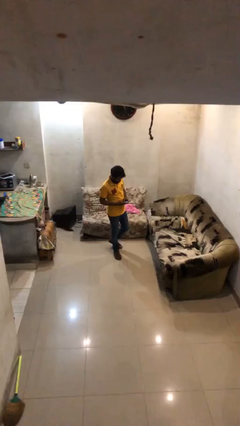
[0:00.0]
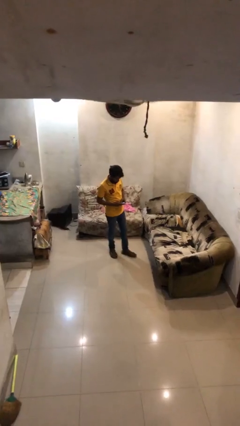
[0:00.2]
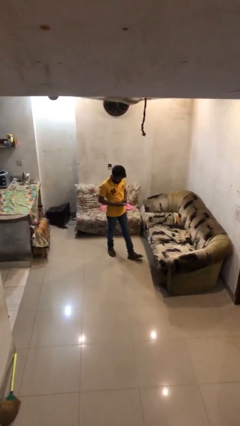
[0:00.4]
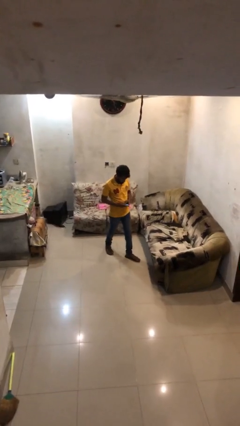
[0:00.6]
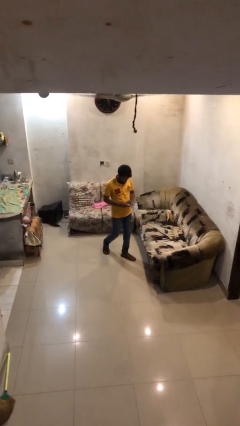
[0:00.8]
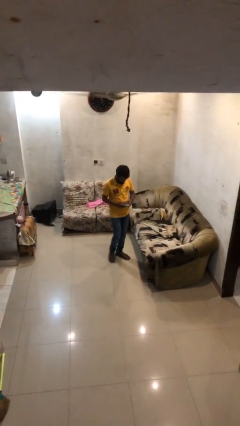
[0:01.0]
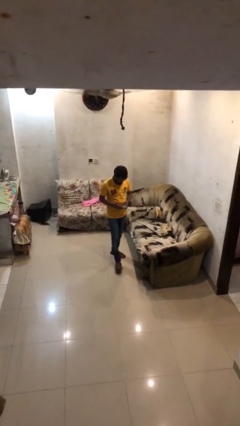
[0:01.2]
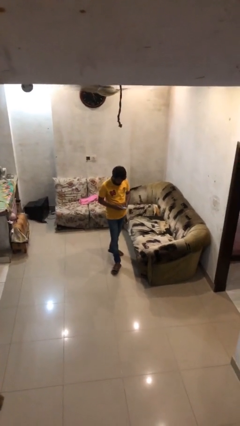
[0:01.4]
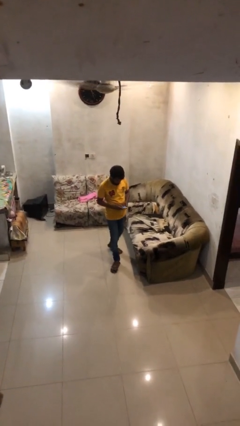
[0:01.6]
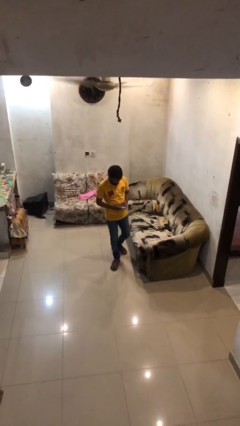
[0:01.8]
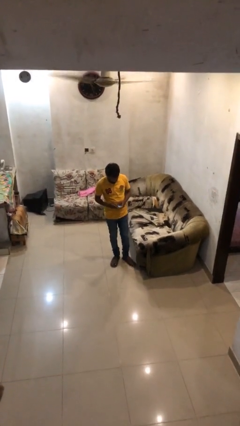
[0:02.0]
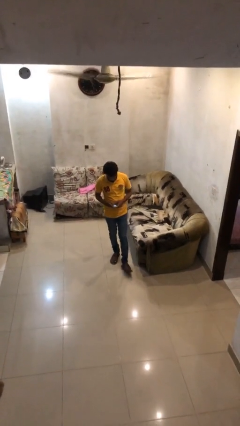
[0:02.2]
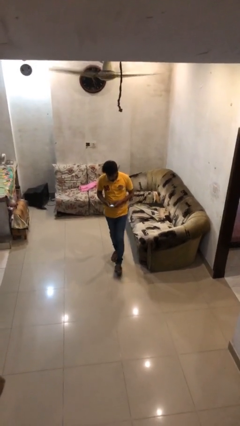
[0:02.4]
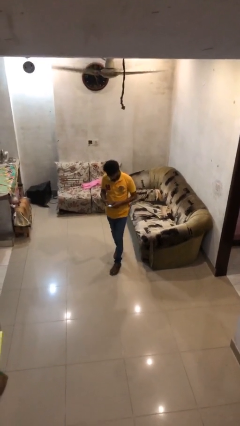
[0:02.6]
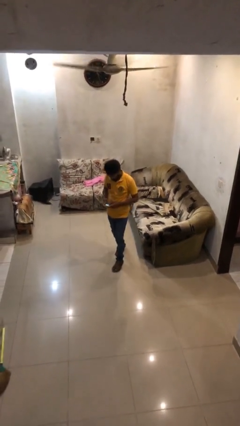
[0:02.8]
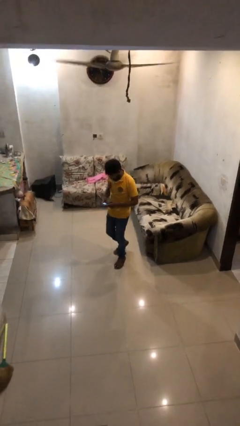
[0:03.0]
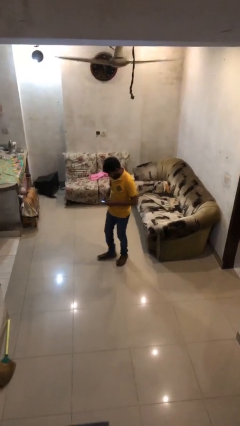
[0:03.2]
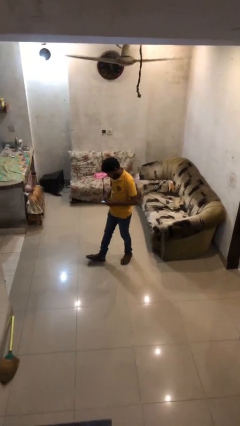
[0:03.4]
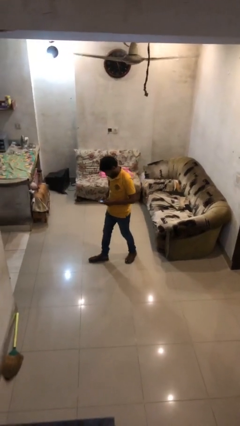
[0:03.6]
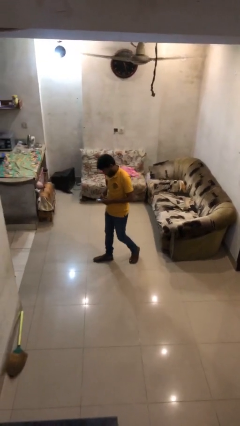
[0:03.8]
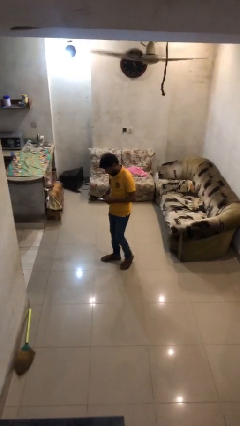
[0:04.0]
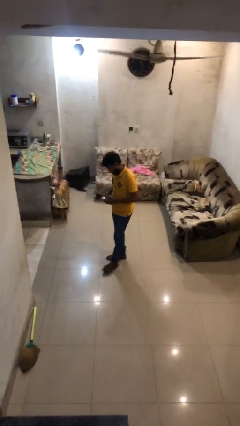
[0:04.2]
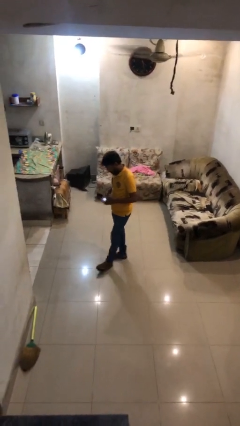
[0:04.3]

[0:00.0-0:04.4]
person texts on phone

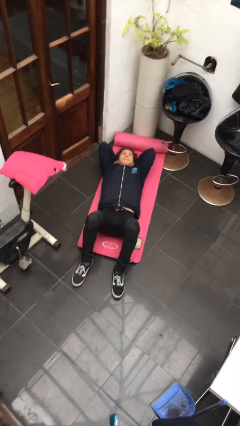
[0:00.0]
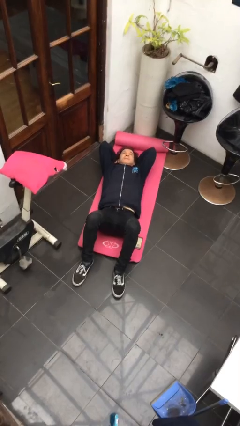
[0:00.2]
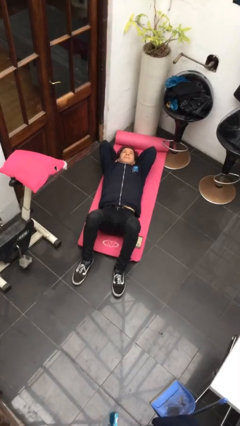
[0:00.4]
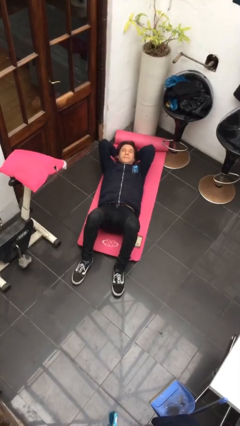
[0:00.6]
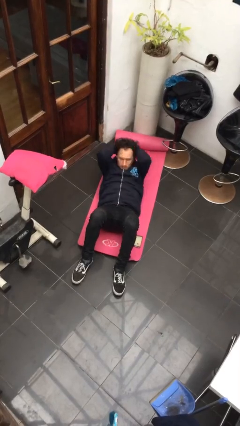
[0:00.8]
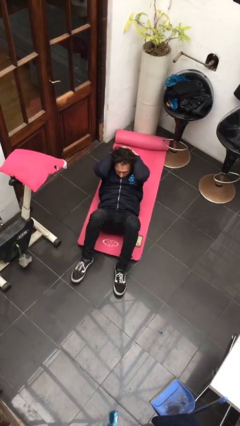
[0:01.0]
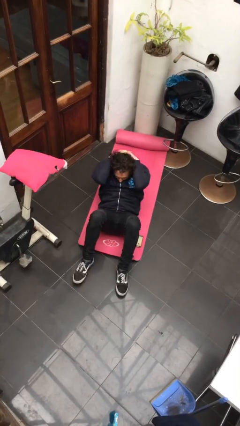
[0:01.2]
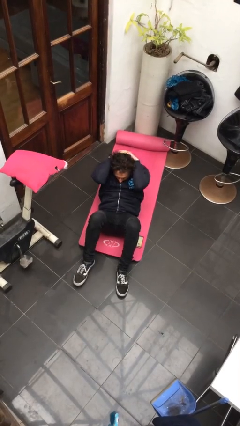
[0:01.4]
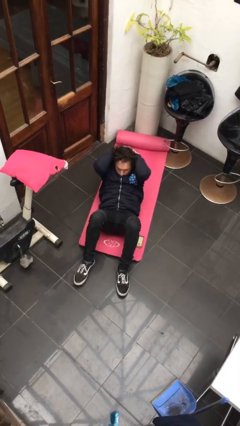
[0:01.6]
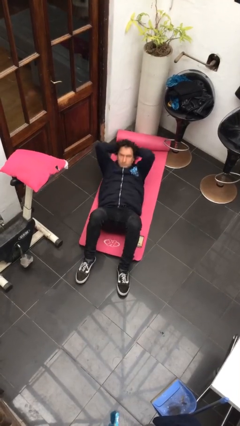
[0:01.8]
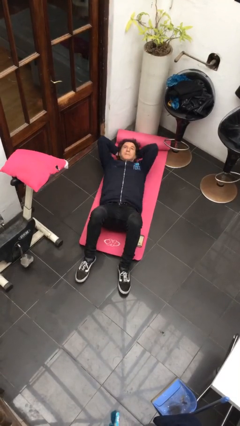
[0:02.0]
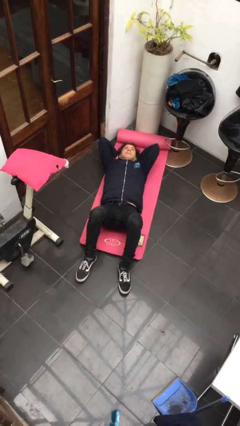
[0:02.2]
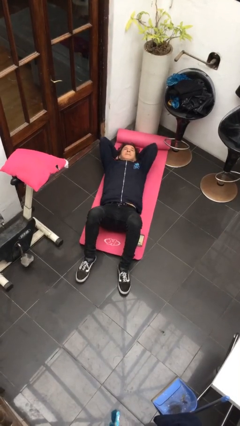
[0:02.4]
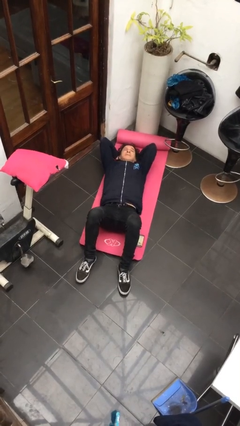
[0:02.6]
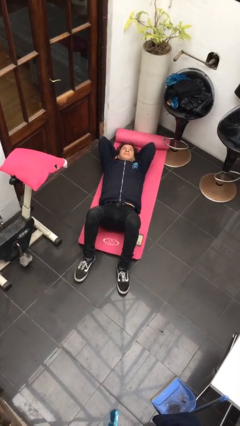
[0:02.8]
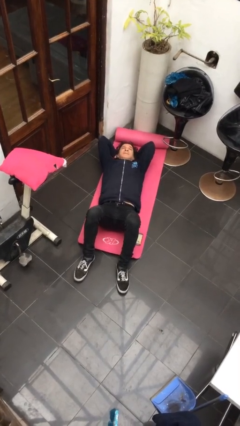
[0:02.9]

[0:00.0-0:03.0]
person exercises with situp

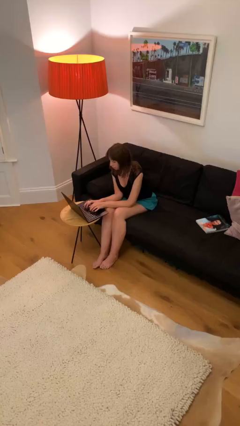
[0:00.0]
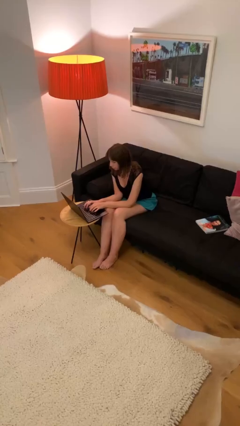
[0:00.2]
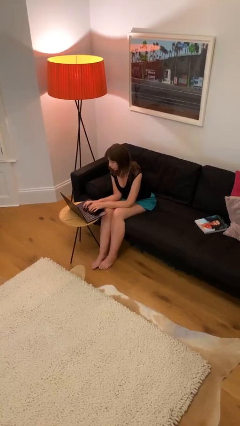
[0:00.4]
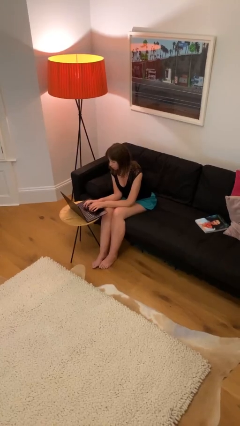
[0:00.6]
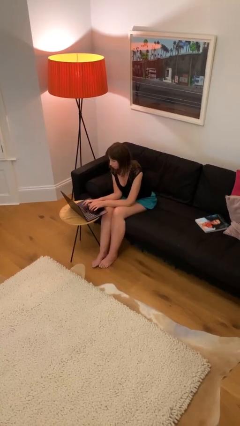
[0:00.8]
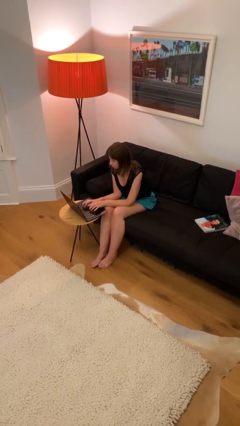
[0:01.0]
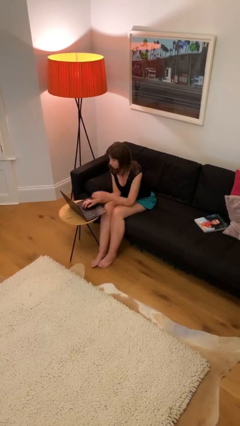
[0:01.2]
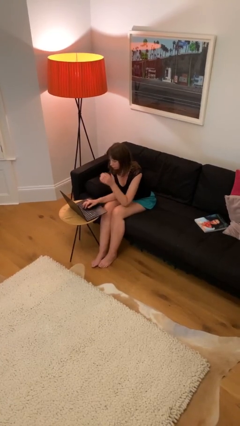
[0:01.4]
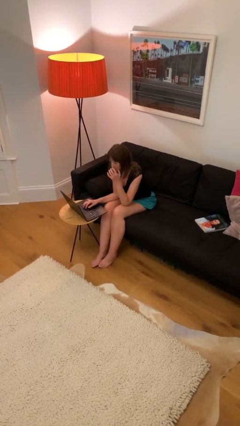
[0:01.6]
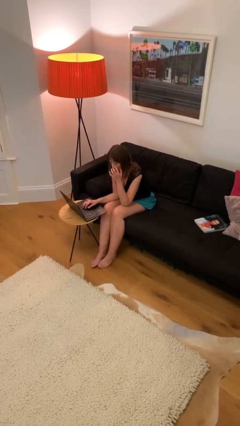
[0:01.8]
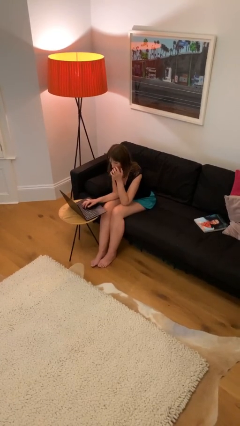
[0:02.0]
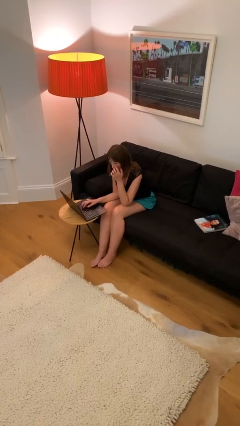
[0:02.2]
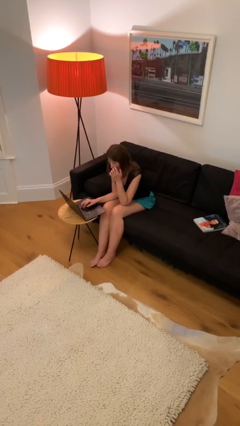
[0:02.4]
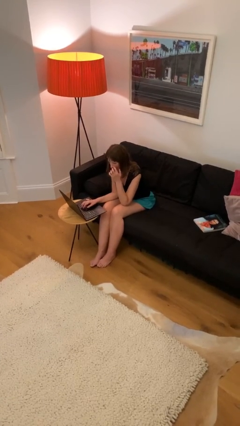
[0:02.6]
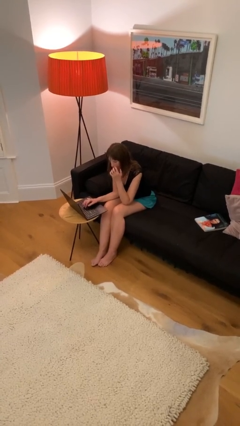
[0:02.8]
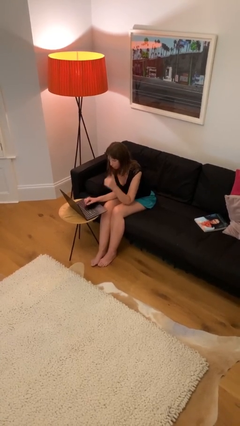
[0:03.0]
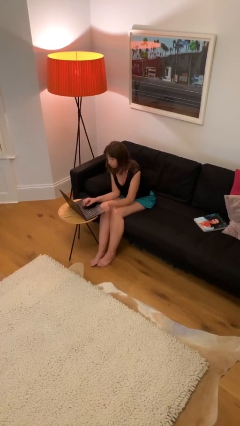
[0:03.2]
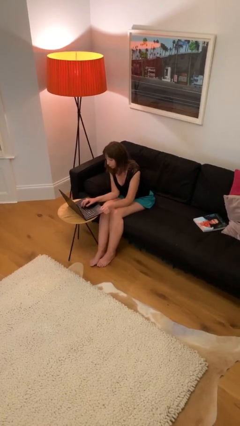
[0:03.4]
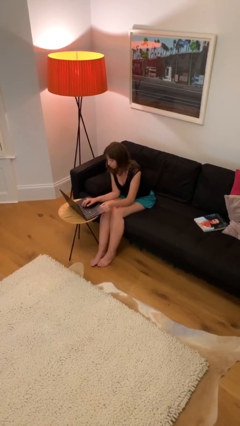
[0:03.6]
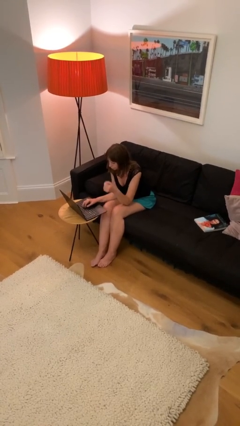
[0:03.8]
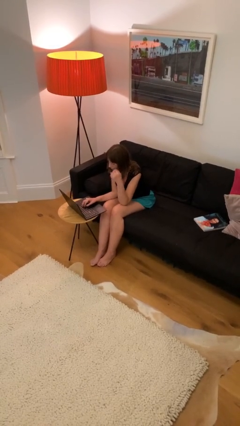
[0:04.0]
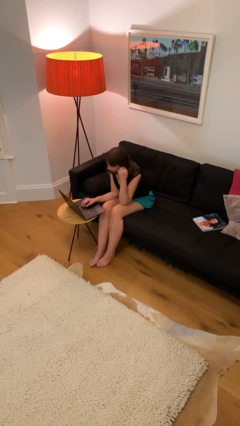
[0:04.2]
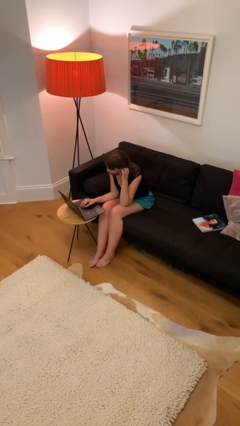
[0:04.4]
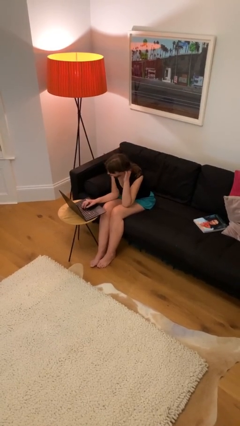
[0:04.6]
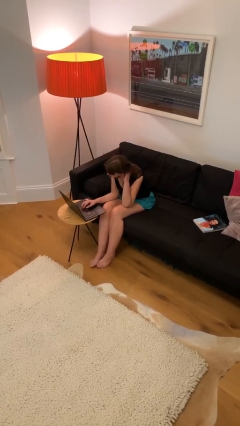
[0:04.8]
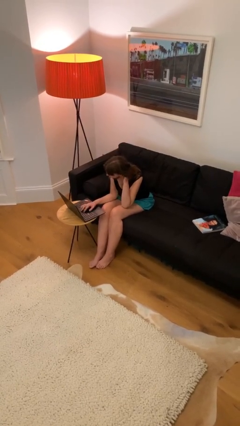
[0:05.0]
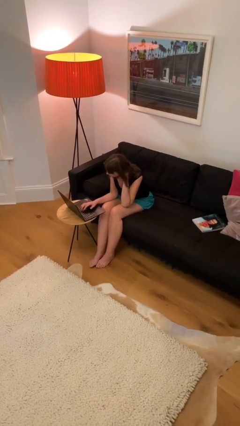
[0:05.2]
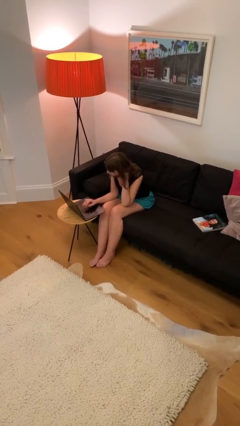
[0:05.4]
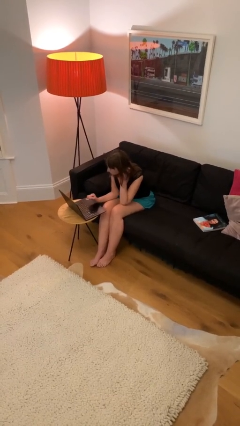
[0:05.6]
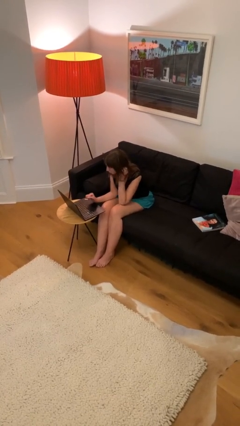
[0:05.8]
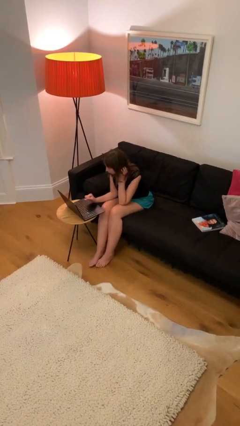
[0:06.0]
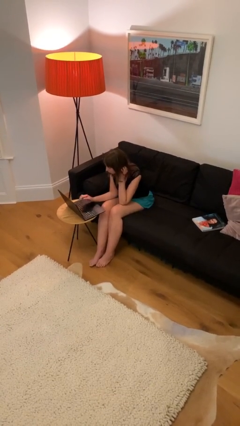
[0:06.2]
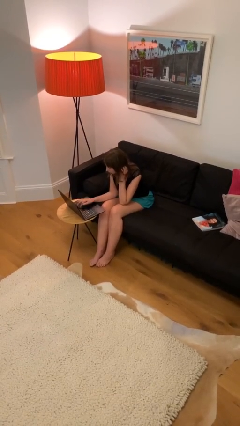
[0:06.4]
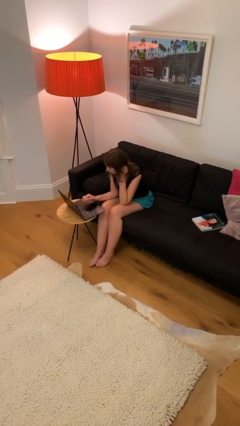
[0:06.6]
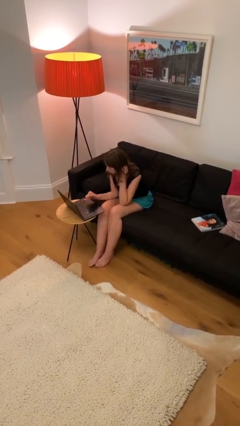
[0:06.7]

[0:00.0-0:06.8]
person interacts with laptop

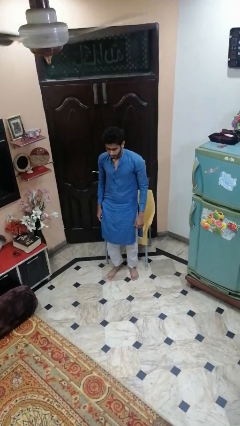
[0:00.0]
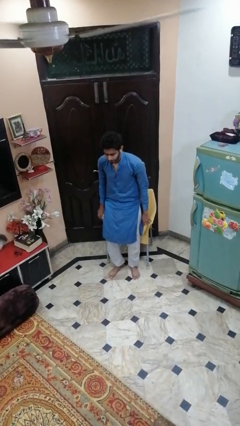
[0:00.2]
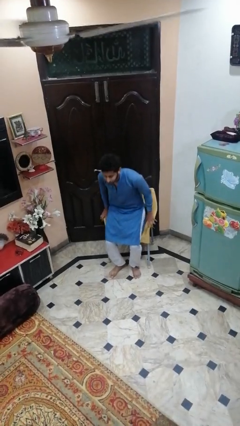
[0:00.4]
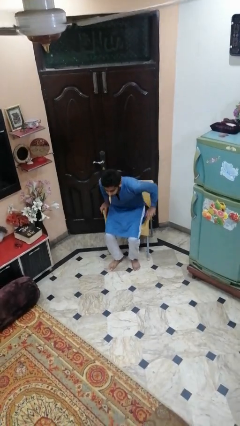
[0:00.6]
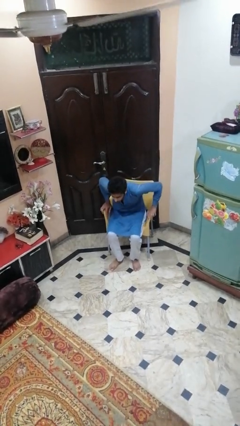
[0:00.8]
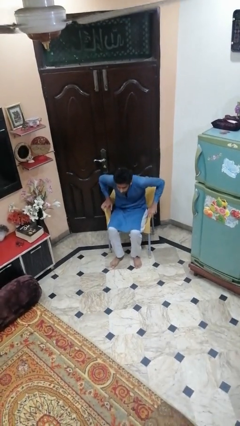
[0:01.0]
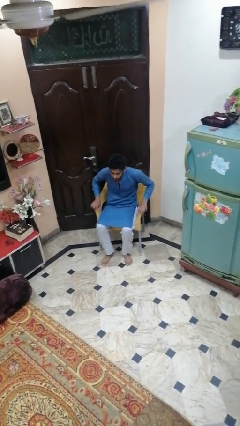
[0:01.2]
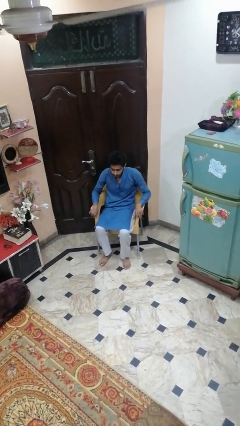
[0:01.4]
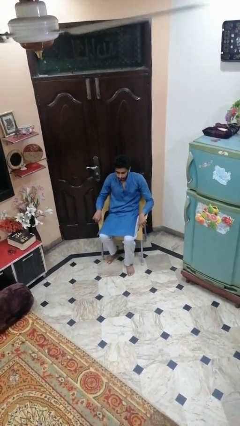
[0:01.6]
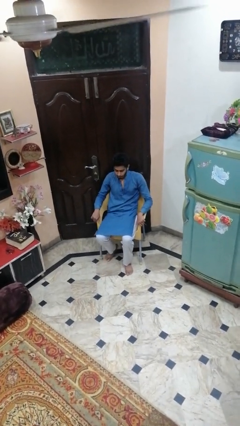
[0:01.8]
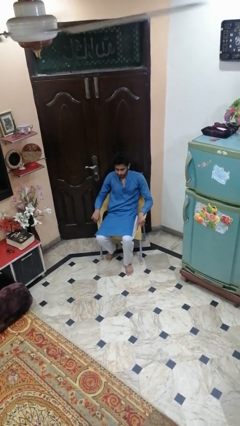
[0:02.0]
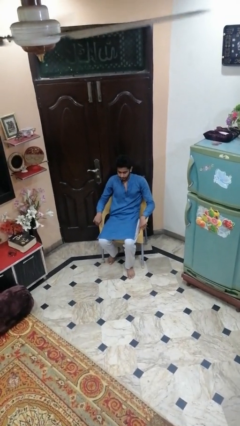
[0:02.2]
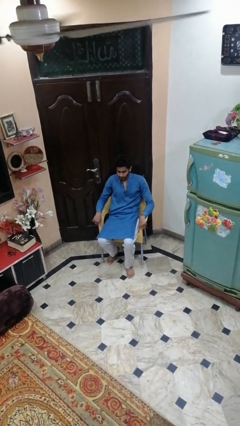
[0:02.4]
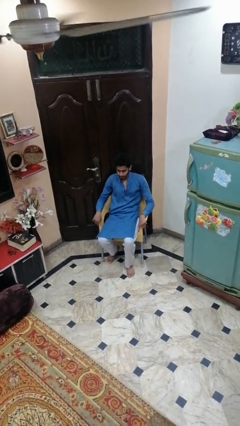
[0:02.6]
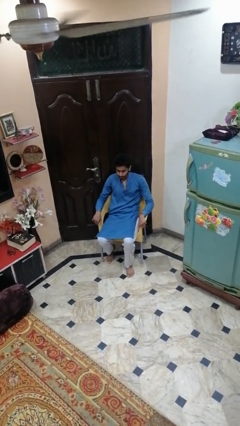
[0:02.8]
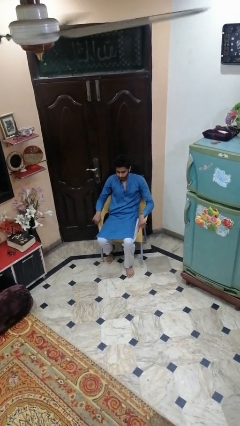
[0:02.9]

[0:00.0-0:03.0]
person sits down

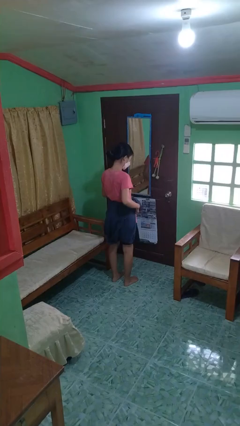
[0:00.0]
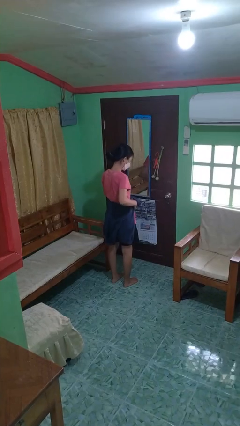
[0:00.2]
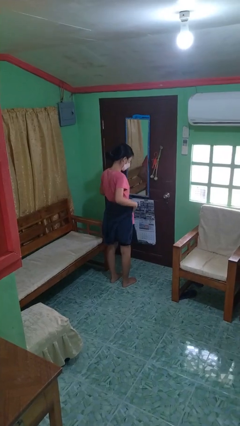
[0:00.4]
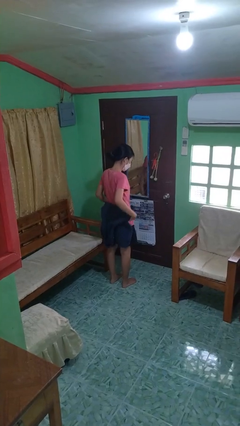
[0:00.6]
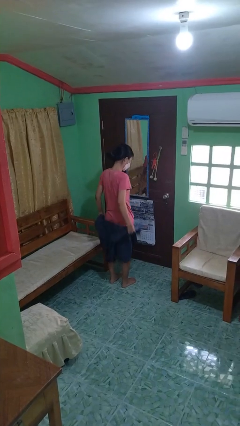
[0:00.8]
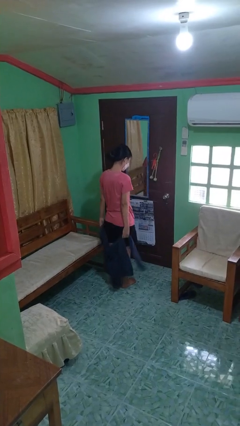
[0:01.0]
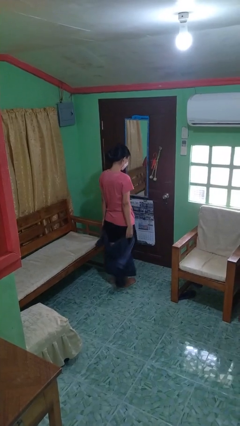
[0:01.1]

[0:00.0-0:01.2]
person unties jacket around waist
